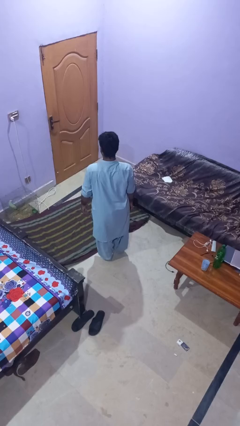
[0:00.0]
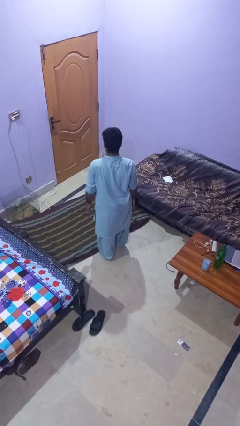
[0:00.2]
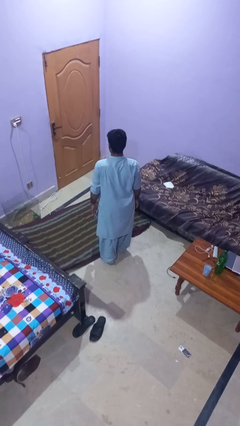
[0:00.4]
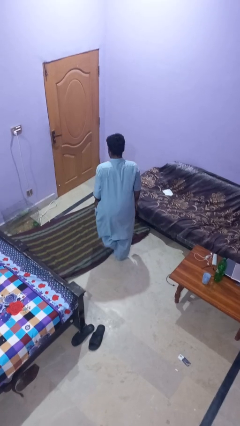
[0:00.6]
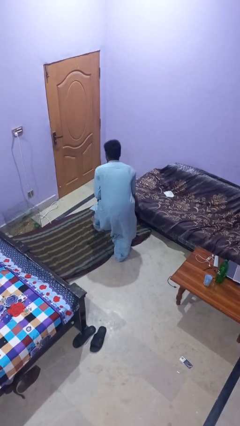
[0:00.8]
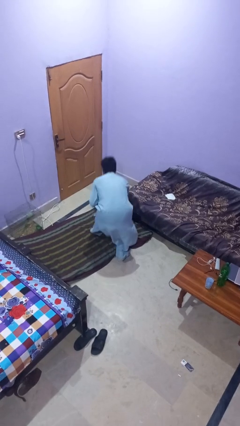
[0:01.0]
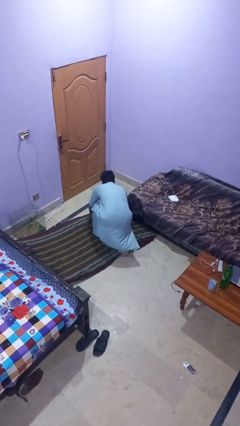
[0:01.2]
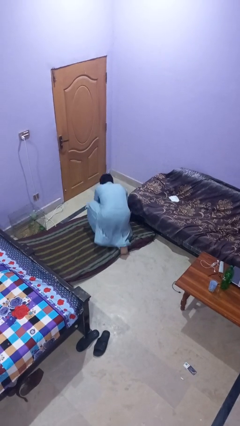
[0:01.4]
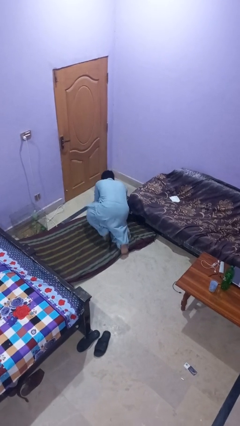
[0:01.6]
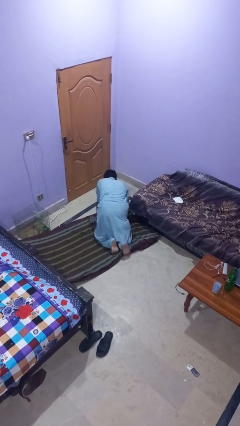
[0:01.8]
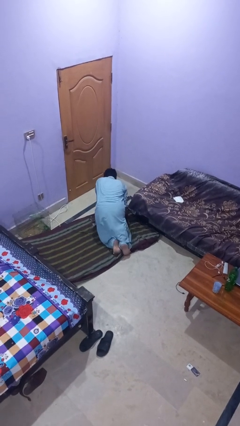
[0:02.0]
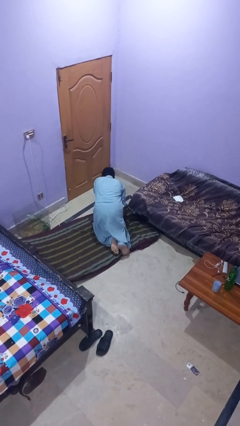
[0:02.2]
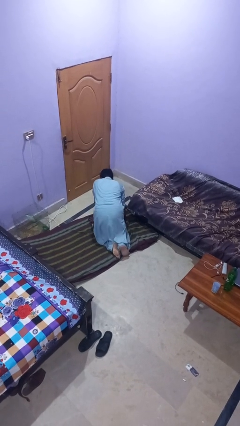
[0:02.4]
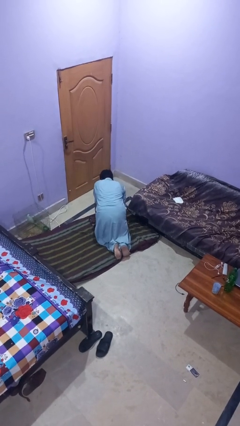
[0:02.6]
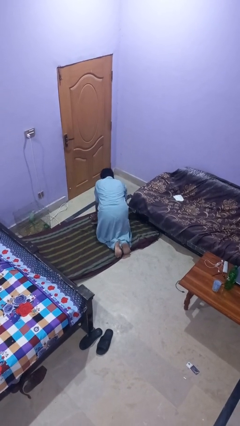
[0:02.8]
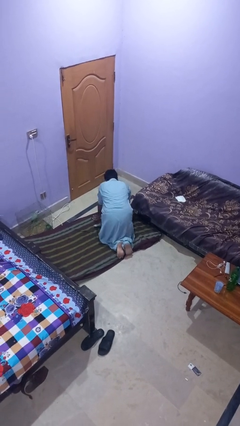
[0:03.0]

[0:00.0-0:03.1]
person trips on object on floor

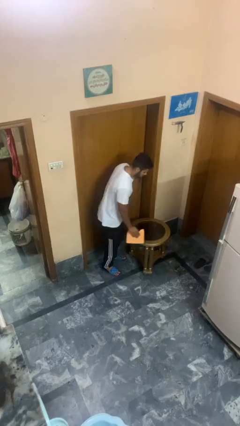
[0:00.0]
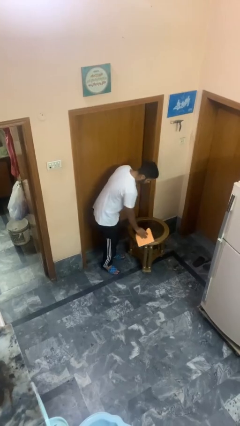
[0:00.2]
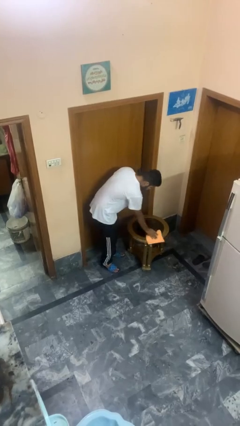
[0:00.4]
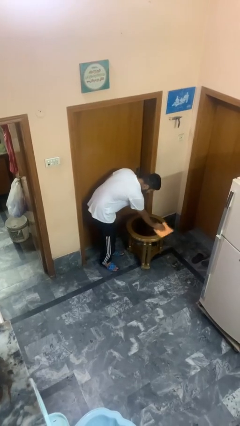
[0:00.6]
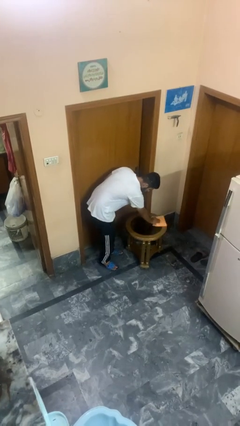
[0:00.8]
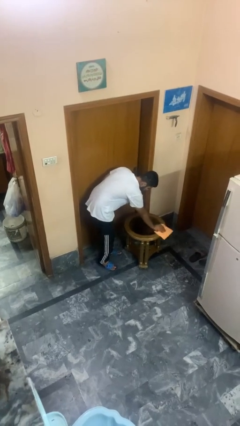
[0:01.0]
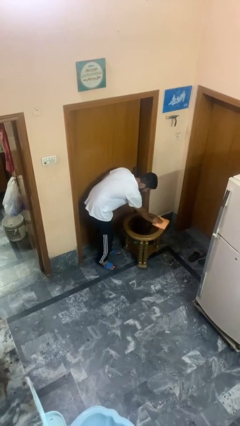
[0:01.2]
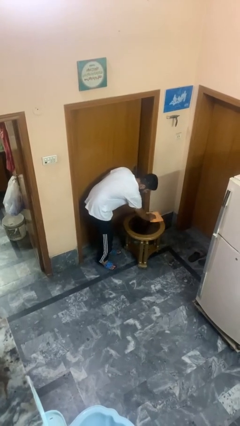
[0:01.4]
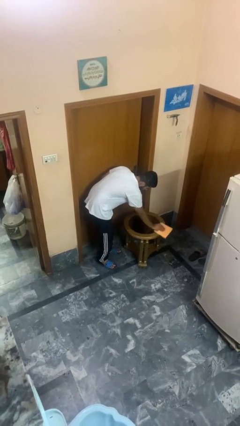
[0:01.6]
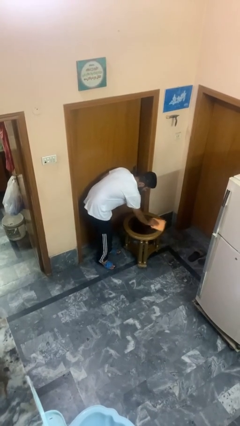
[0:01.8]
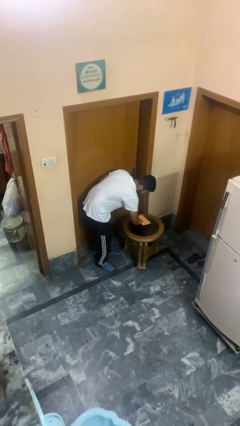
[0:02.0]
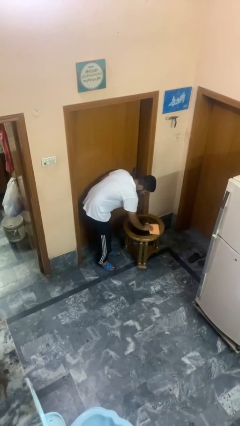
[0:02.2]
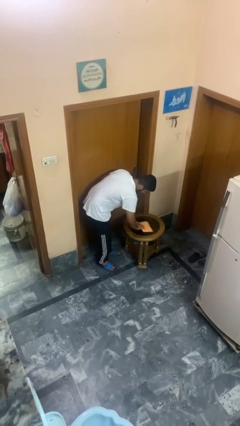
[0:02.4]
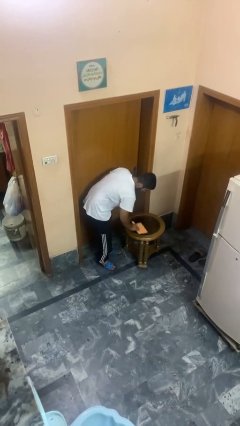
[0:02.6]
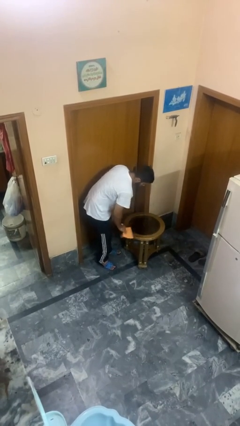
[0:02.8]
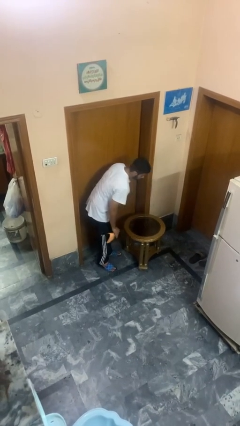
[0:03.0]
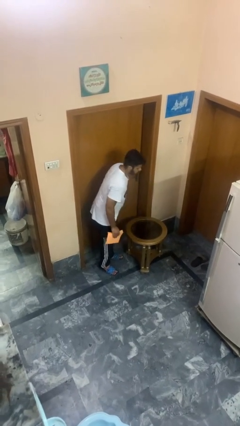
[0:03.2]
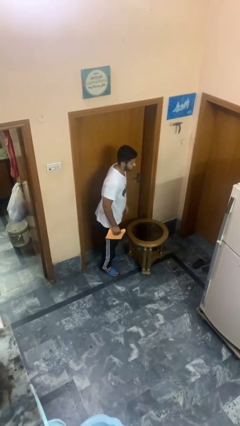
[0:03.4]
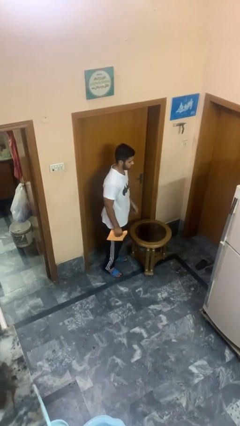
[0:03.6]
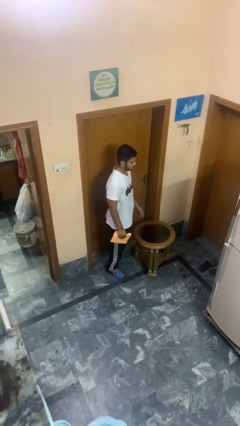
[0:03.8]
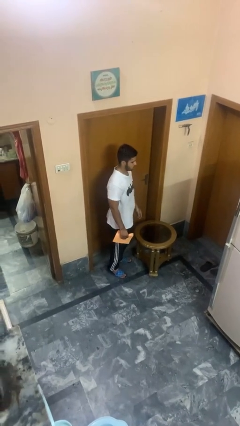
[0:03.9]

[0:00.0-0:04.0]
person cleans table with rag

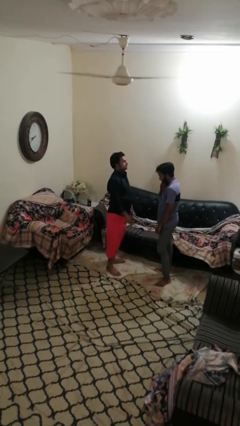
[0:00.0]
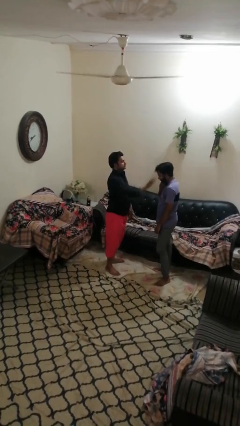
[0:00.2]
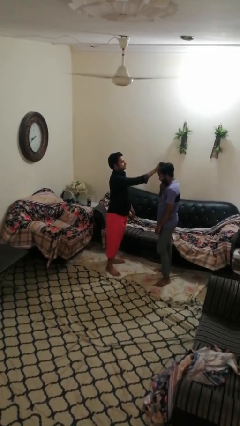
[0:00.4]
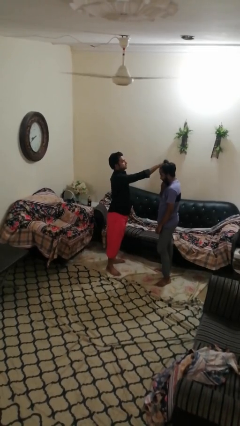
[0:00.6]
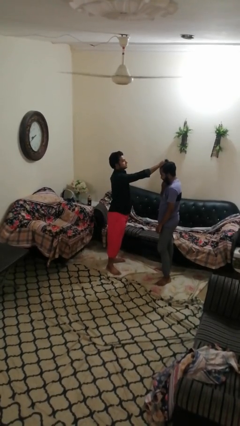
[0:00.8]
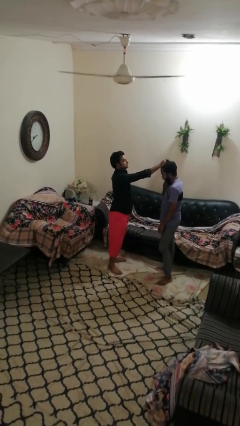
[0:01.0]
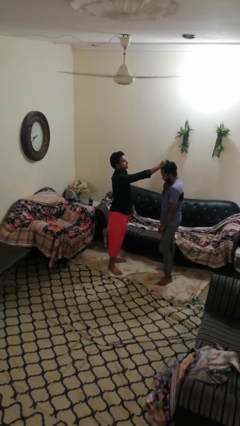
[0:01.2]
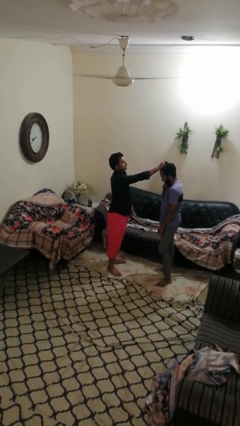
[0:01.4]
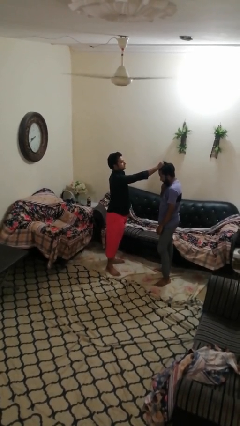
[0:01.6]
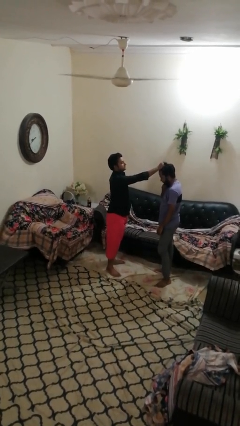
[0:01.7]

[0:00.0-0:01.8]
person grabs person by hair

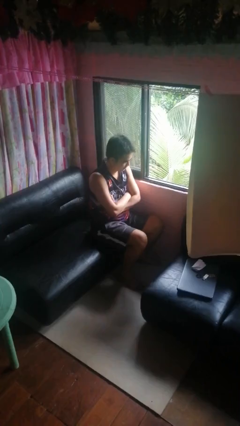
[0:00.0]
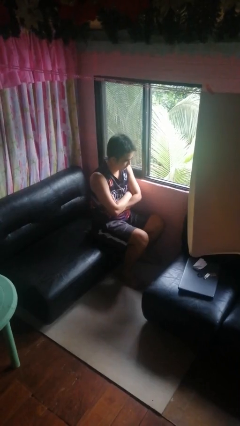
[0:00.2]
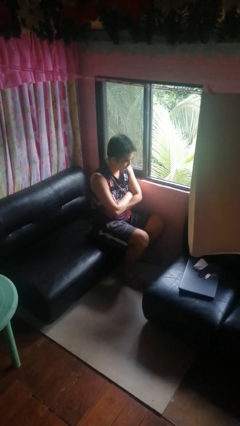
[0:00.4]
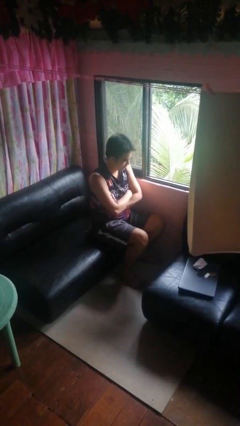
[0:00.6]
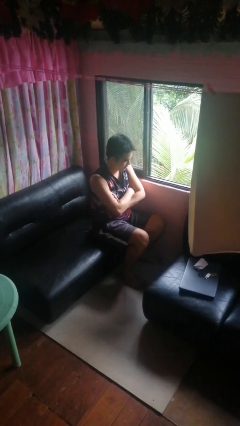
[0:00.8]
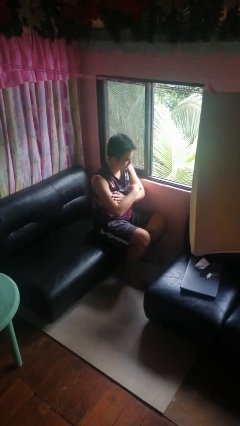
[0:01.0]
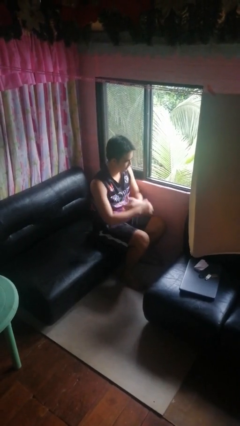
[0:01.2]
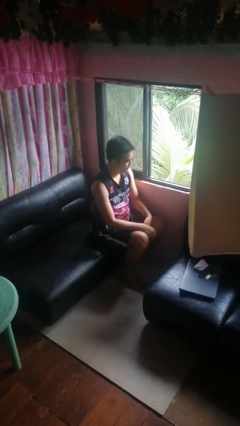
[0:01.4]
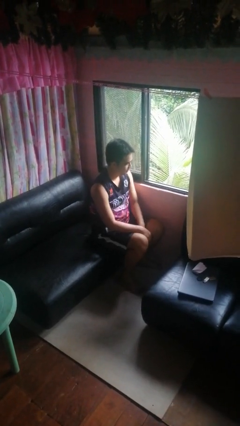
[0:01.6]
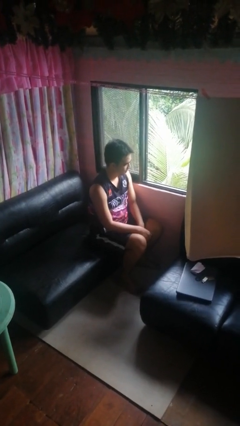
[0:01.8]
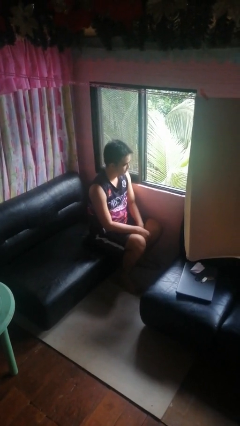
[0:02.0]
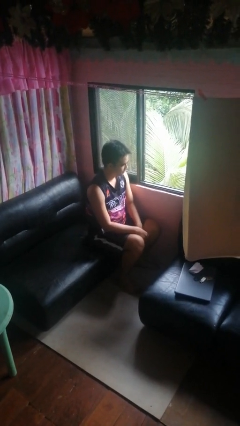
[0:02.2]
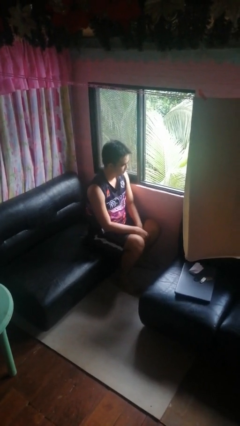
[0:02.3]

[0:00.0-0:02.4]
person gestures arms x

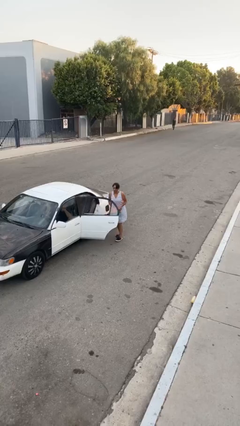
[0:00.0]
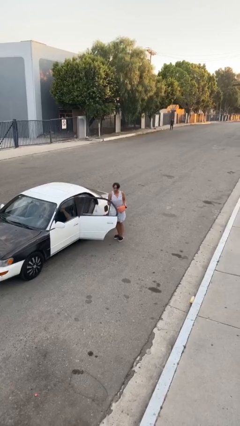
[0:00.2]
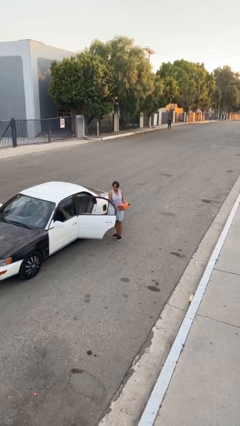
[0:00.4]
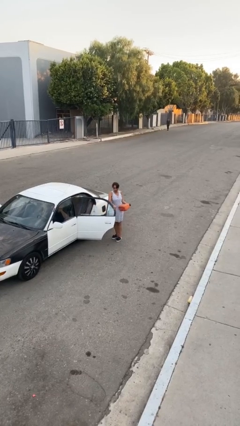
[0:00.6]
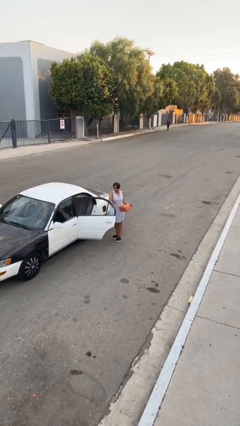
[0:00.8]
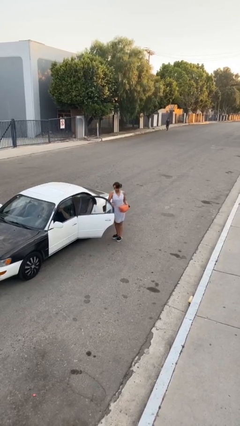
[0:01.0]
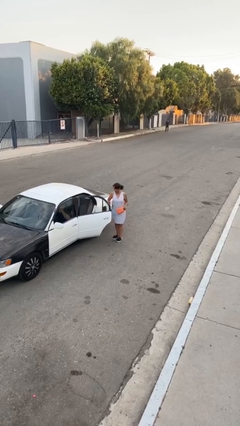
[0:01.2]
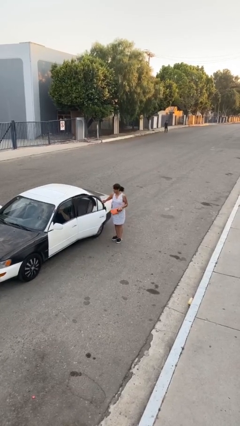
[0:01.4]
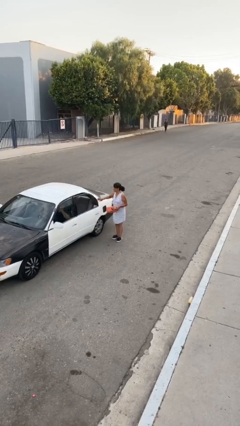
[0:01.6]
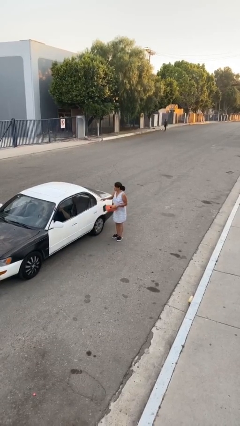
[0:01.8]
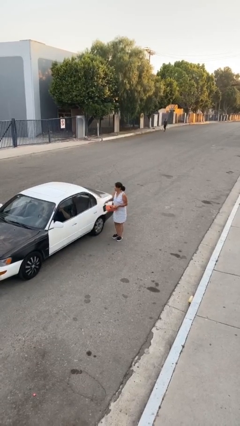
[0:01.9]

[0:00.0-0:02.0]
person closes car door

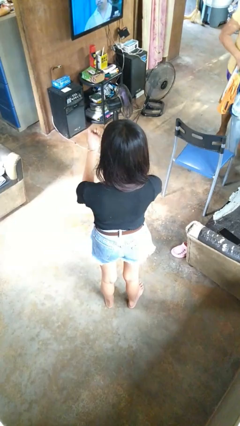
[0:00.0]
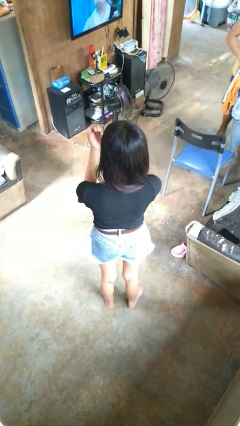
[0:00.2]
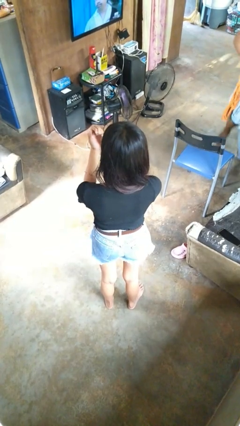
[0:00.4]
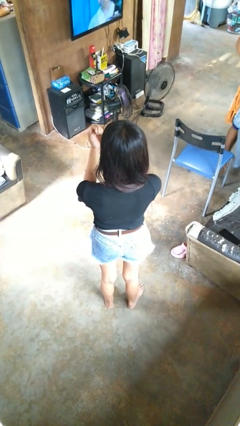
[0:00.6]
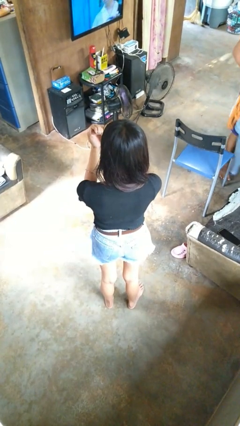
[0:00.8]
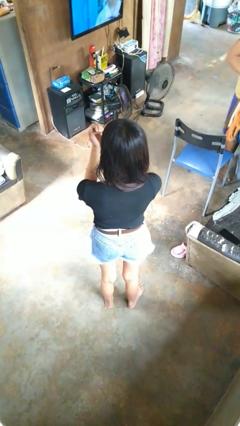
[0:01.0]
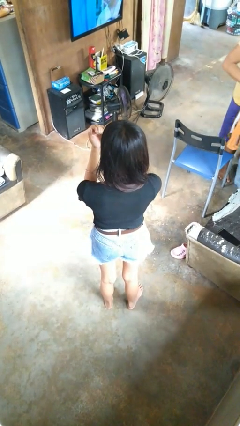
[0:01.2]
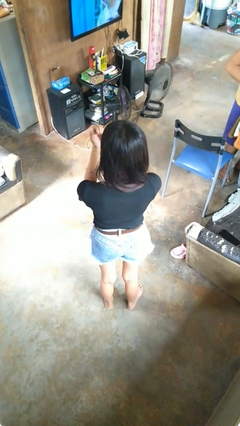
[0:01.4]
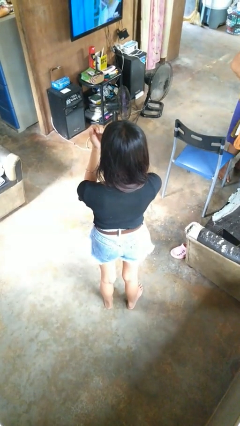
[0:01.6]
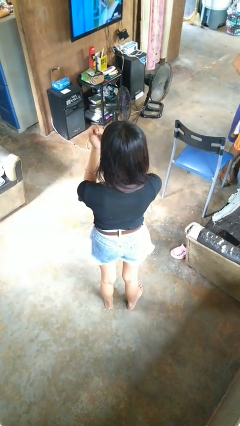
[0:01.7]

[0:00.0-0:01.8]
person files fingernails

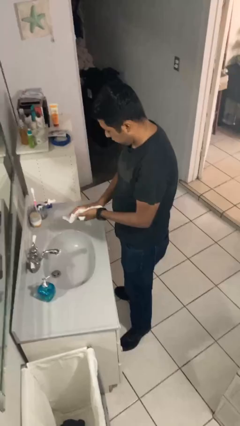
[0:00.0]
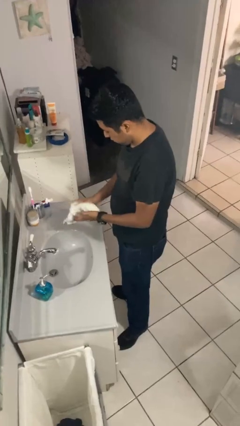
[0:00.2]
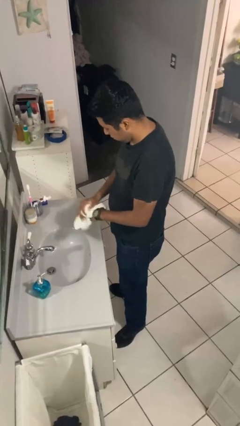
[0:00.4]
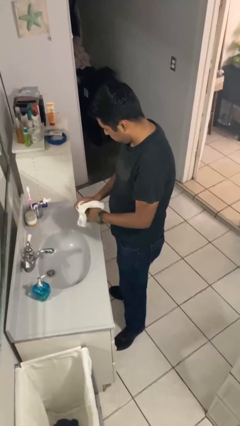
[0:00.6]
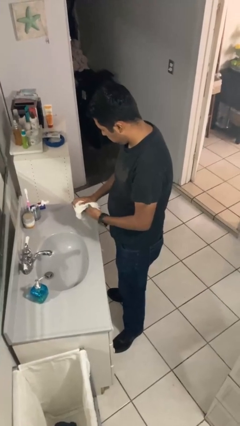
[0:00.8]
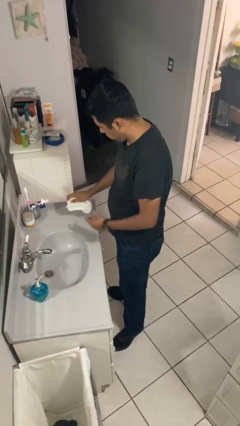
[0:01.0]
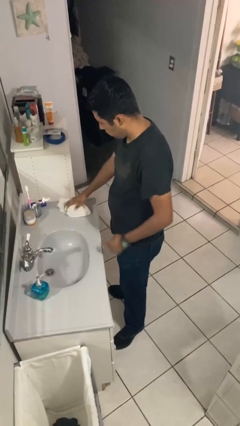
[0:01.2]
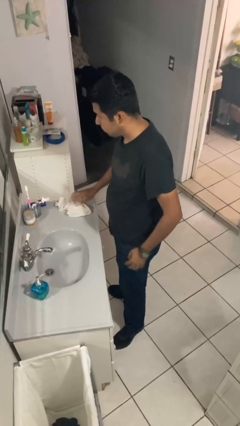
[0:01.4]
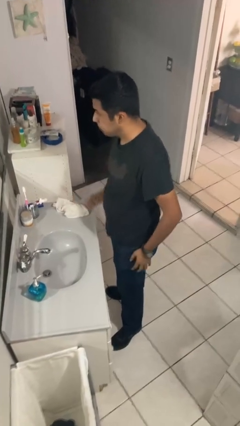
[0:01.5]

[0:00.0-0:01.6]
person dries hands with towel
